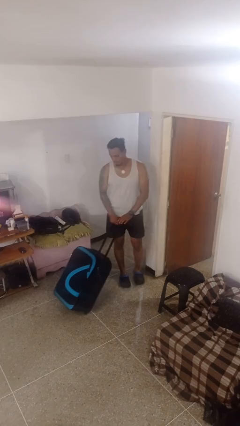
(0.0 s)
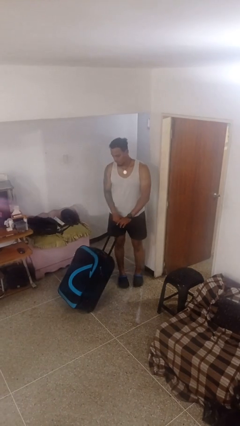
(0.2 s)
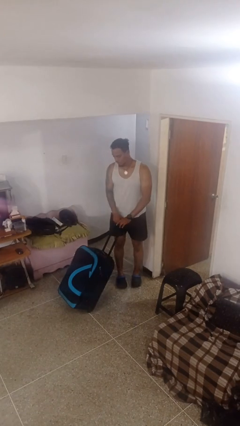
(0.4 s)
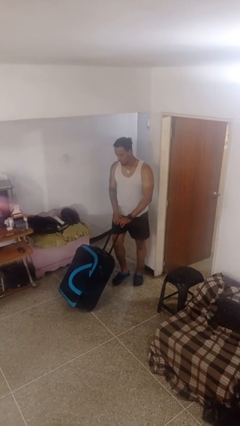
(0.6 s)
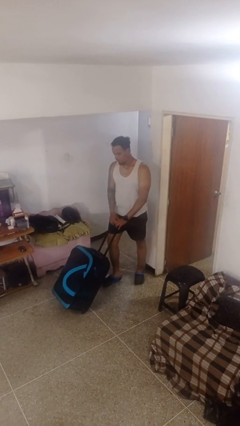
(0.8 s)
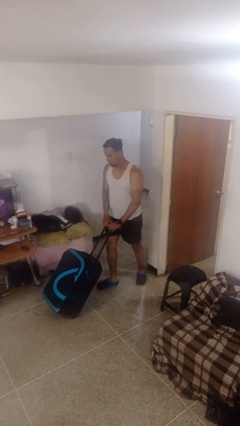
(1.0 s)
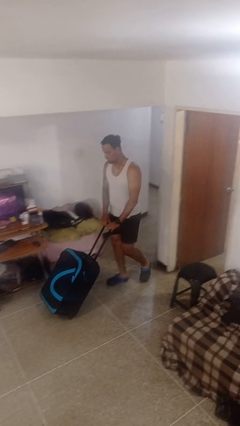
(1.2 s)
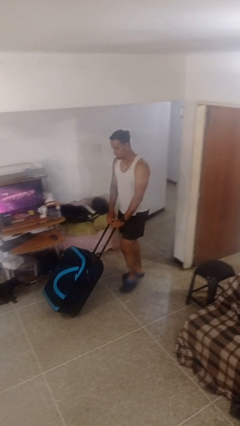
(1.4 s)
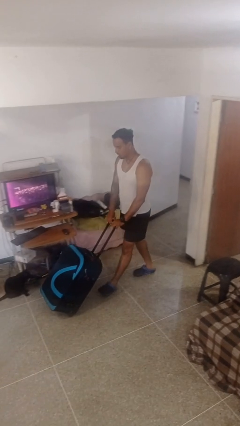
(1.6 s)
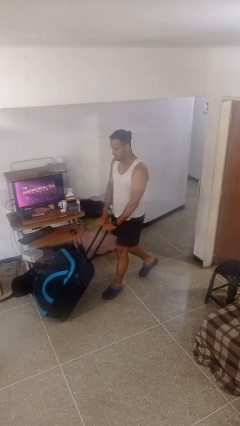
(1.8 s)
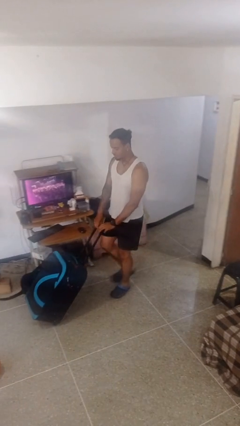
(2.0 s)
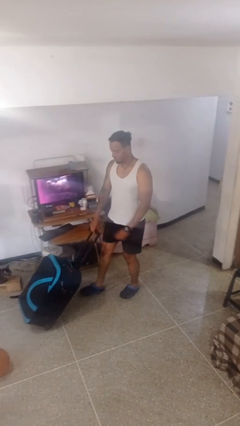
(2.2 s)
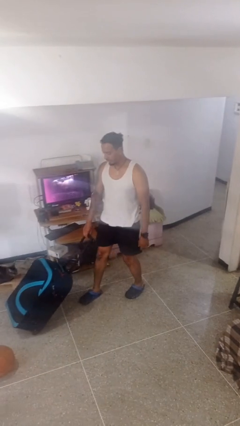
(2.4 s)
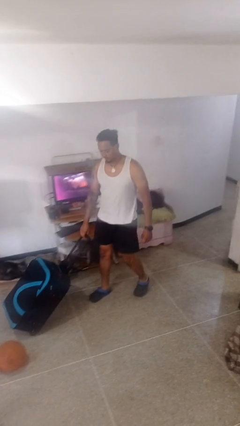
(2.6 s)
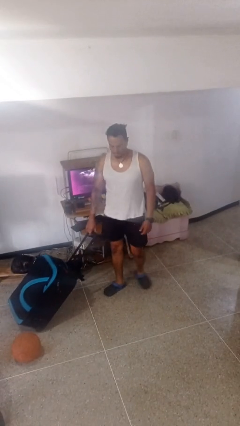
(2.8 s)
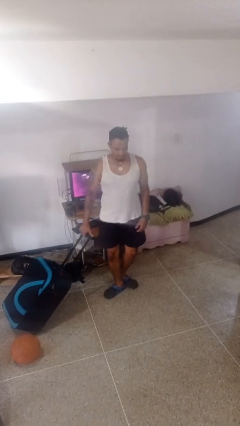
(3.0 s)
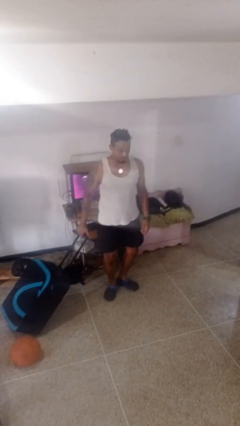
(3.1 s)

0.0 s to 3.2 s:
person pushes wheeled cart

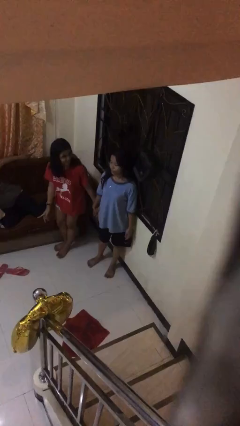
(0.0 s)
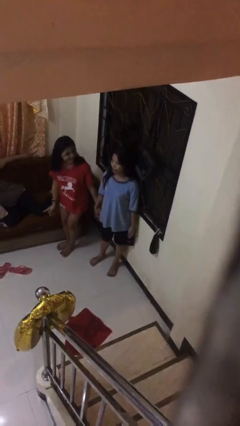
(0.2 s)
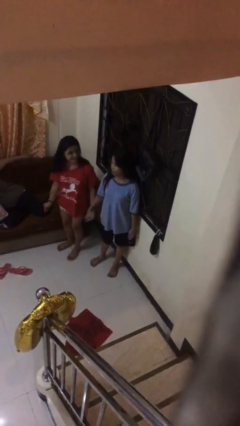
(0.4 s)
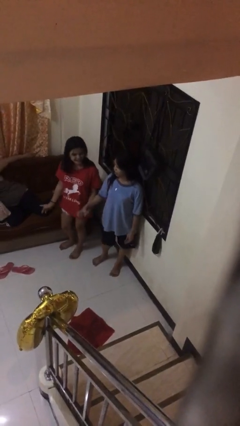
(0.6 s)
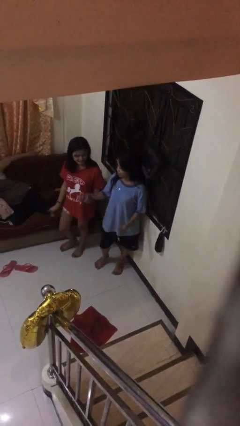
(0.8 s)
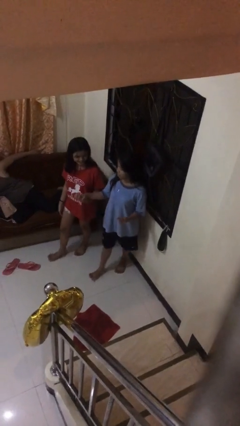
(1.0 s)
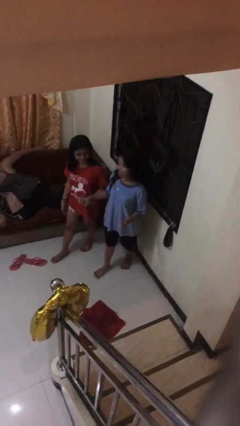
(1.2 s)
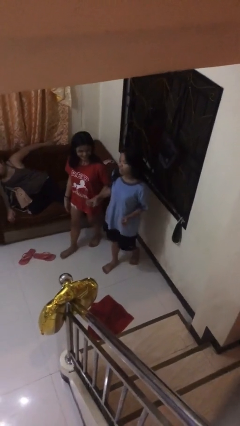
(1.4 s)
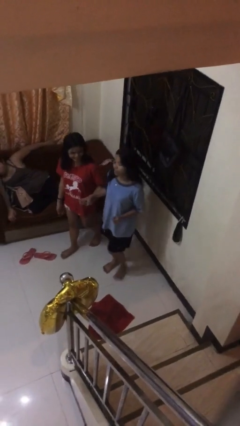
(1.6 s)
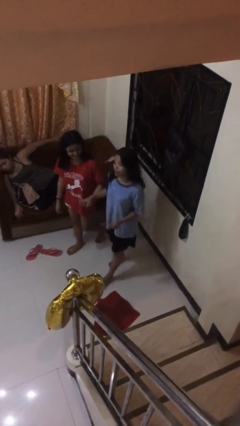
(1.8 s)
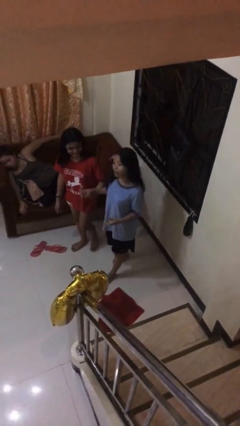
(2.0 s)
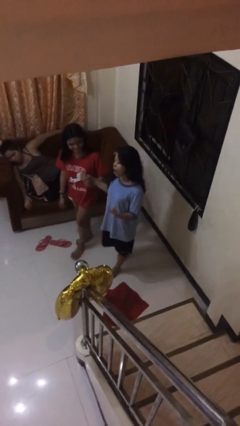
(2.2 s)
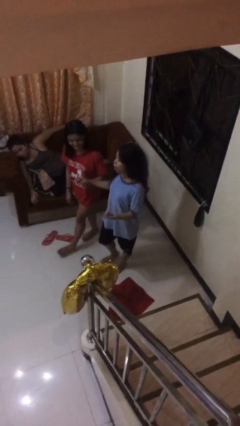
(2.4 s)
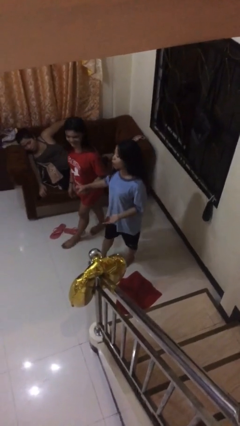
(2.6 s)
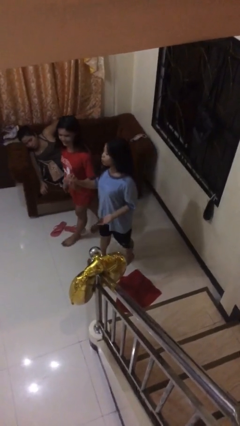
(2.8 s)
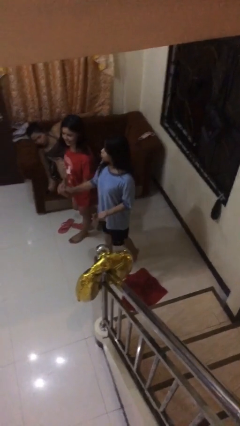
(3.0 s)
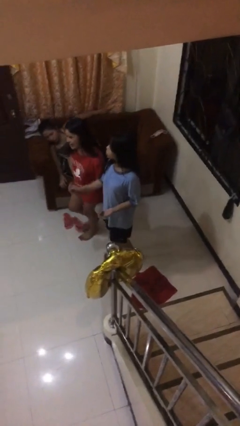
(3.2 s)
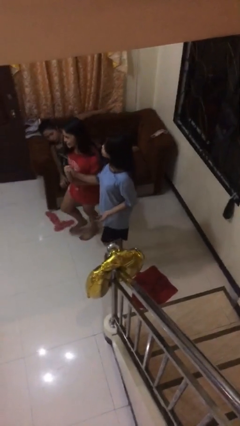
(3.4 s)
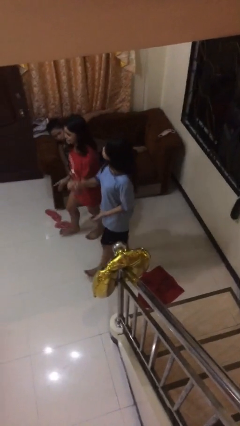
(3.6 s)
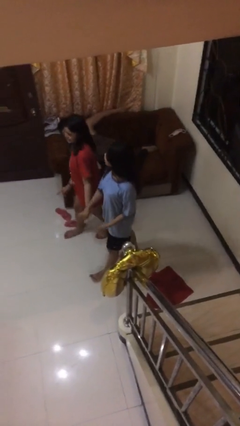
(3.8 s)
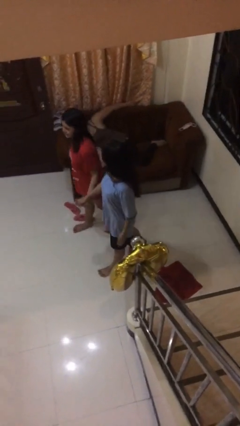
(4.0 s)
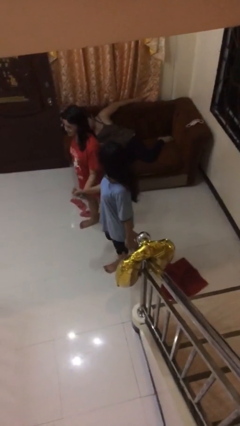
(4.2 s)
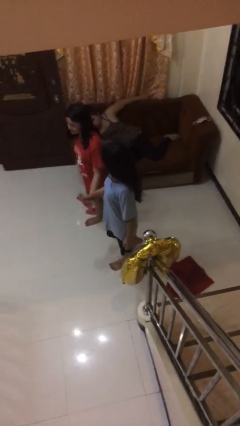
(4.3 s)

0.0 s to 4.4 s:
person holds hand

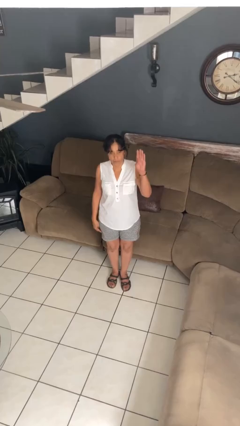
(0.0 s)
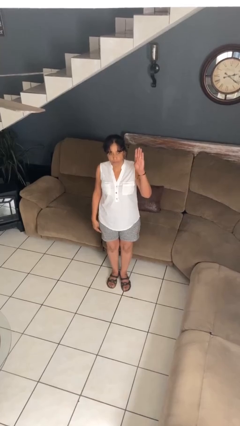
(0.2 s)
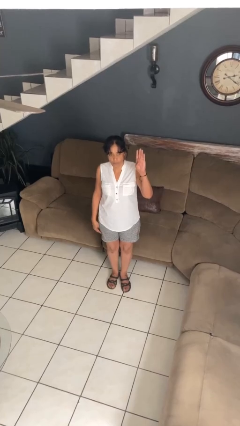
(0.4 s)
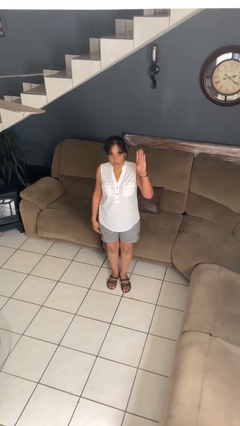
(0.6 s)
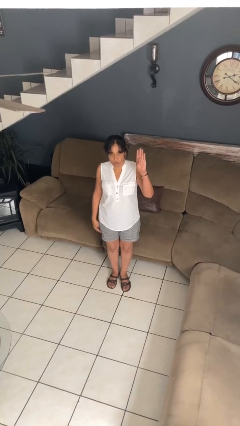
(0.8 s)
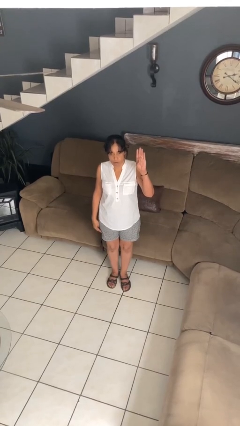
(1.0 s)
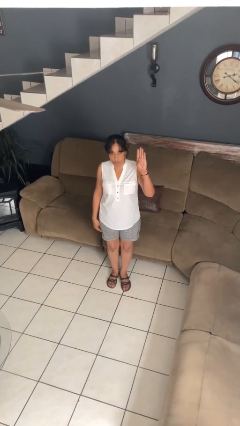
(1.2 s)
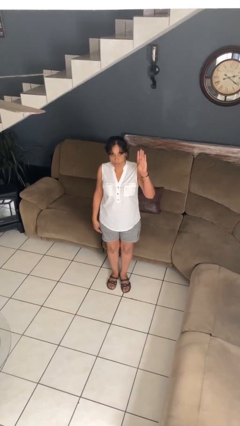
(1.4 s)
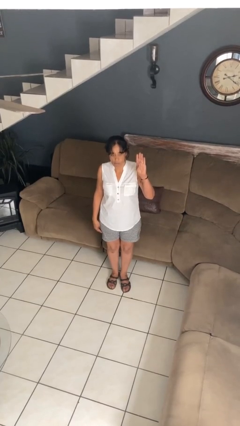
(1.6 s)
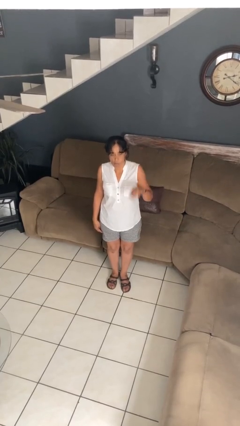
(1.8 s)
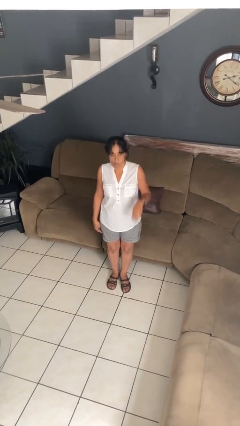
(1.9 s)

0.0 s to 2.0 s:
person gestures number four

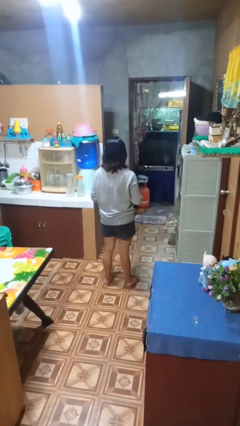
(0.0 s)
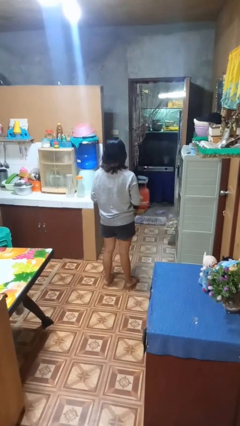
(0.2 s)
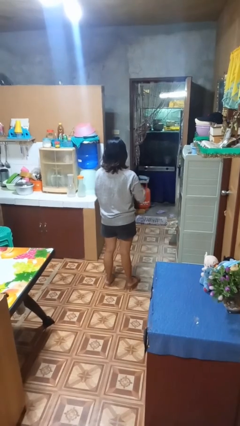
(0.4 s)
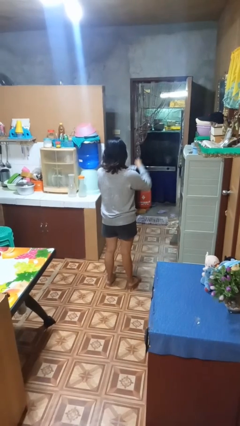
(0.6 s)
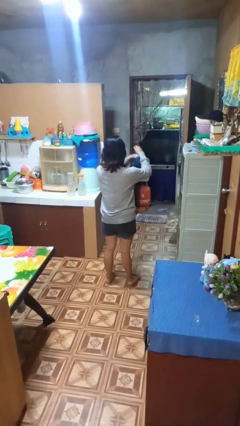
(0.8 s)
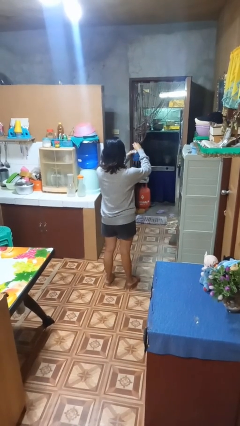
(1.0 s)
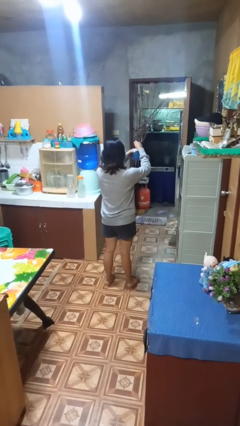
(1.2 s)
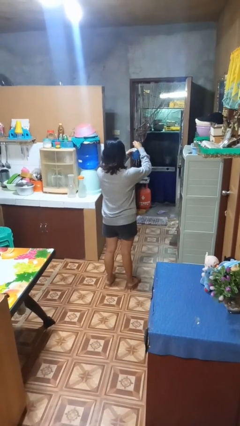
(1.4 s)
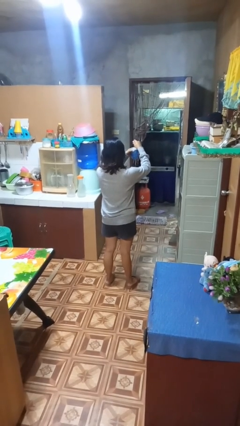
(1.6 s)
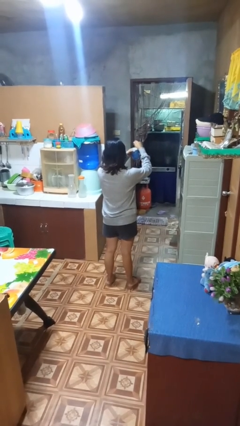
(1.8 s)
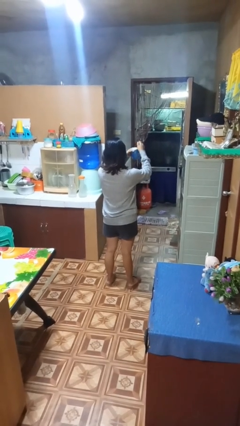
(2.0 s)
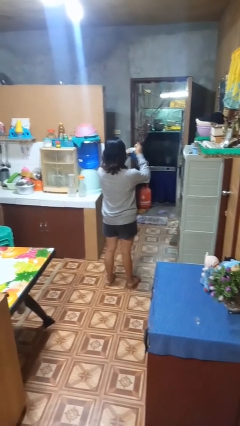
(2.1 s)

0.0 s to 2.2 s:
person stirs mug

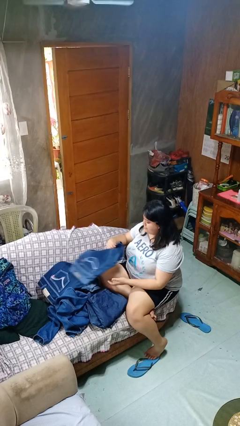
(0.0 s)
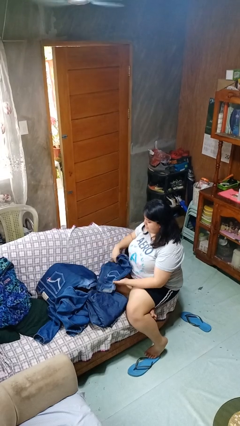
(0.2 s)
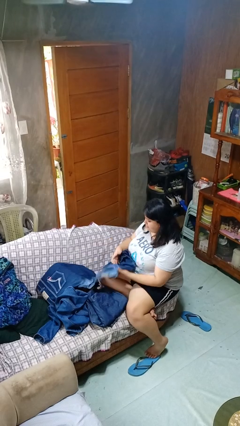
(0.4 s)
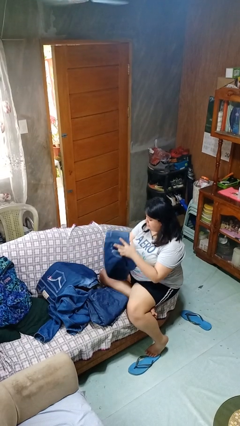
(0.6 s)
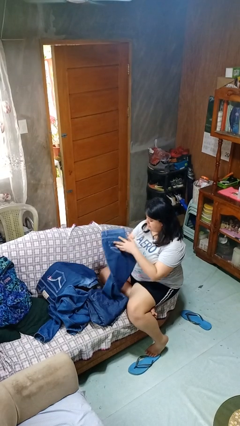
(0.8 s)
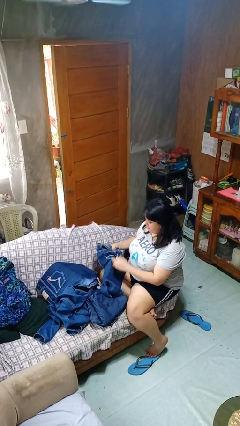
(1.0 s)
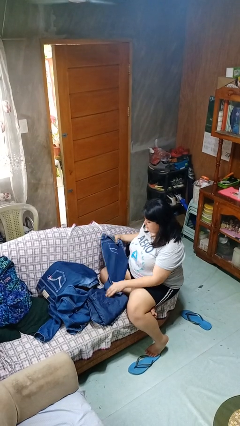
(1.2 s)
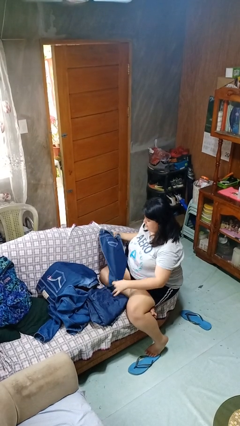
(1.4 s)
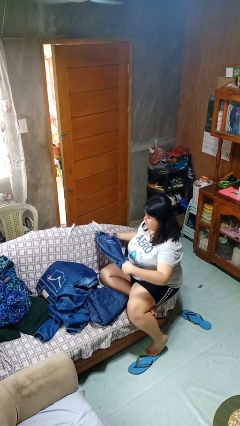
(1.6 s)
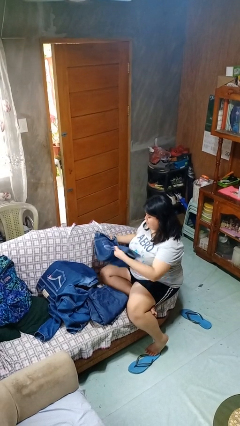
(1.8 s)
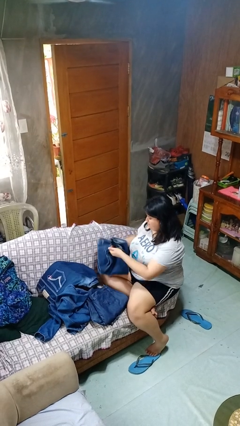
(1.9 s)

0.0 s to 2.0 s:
person folds pants

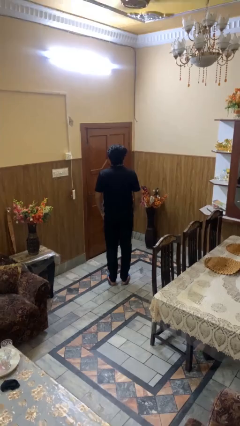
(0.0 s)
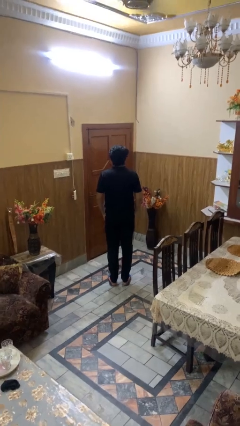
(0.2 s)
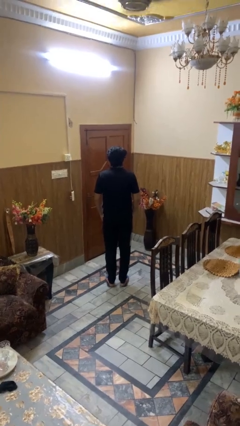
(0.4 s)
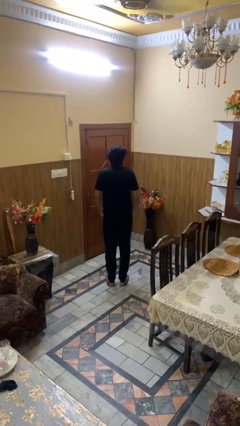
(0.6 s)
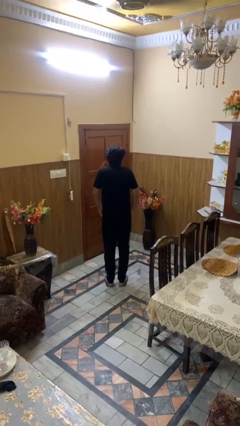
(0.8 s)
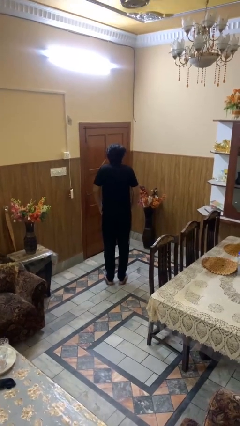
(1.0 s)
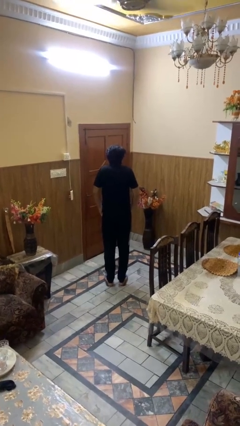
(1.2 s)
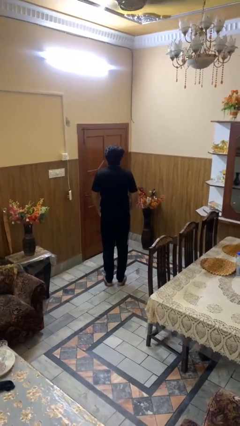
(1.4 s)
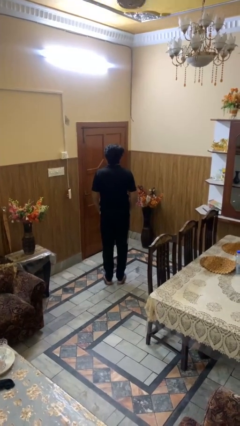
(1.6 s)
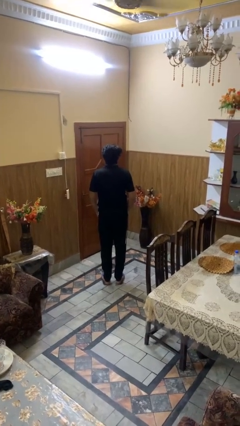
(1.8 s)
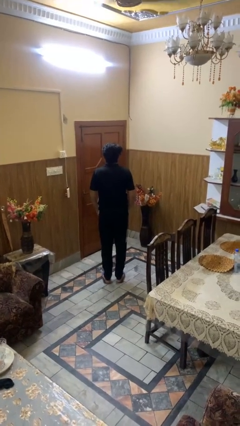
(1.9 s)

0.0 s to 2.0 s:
person shrugs

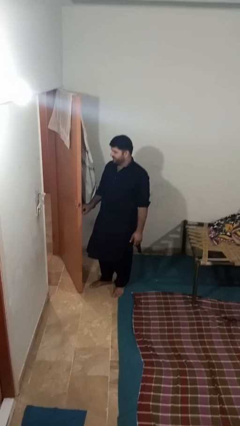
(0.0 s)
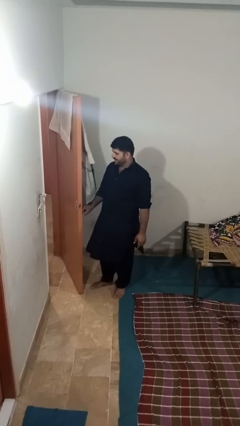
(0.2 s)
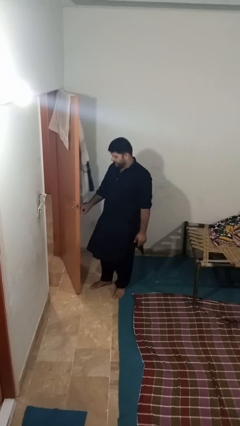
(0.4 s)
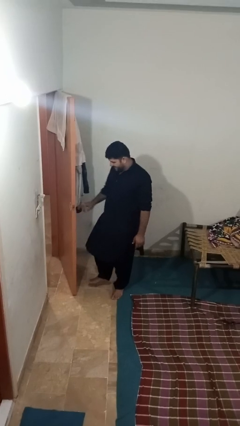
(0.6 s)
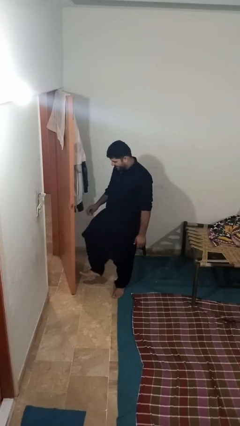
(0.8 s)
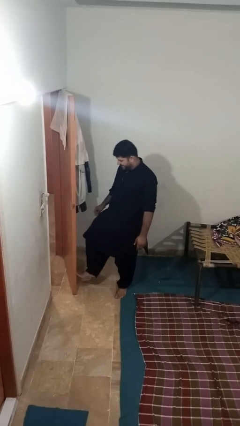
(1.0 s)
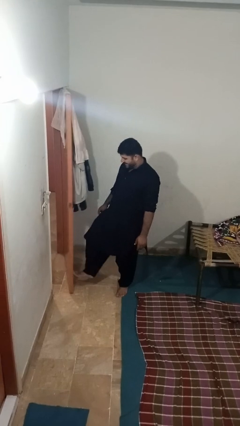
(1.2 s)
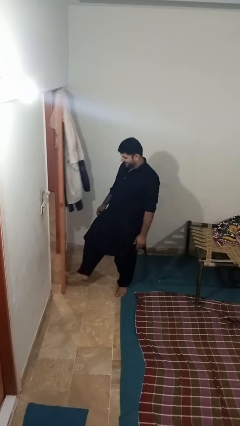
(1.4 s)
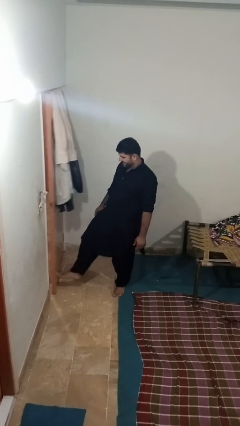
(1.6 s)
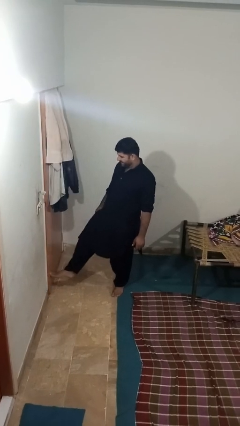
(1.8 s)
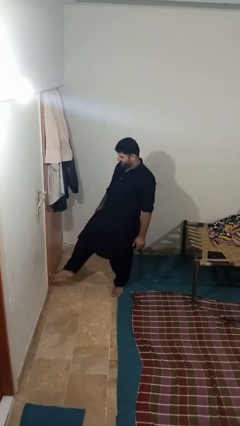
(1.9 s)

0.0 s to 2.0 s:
person closes door with foot
